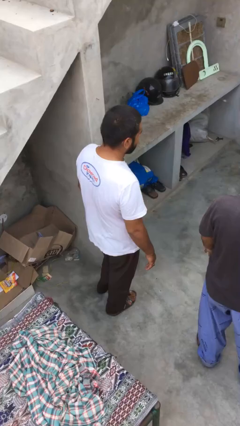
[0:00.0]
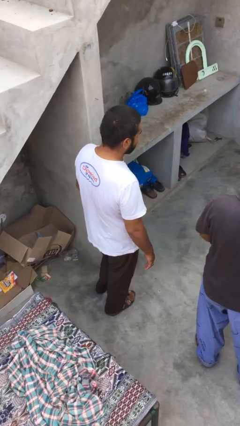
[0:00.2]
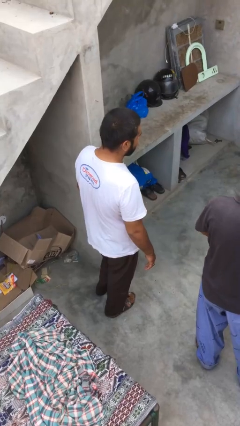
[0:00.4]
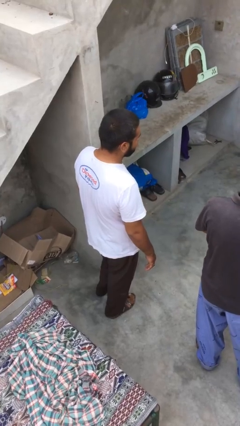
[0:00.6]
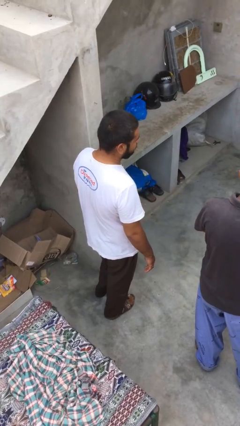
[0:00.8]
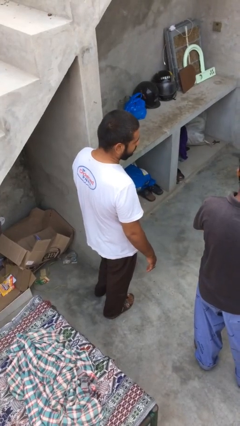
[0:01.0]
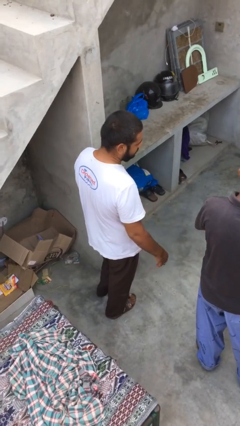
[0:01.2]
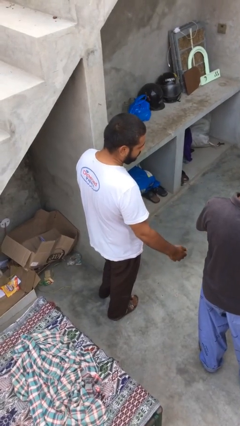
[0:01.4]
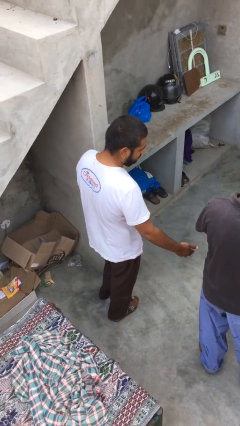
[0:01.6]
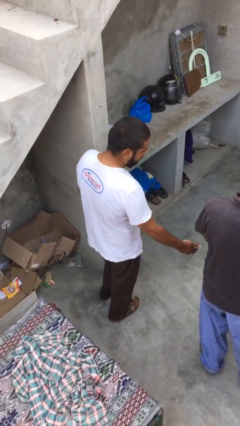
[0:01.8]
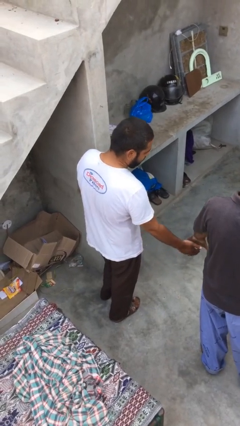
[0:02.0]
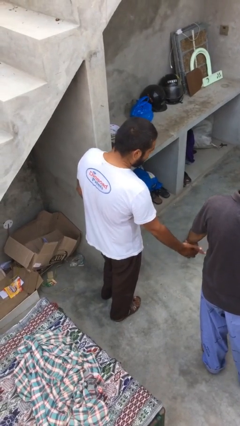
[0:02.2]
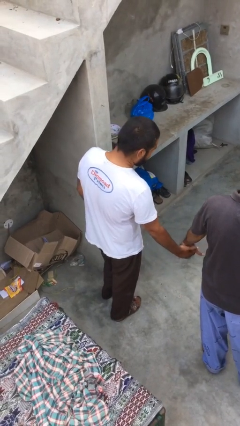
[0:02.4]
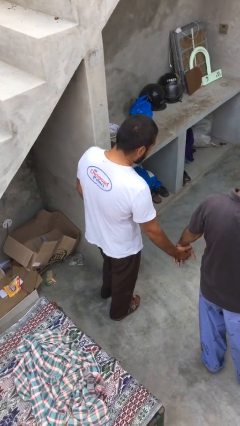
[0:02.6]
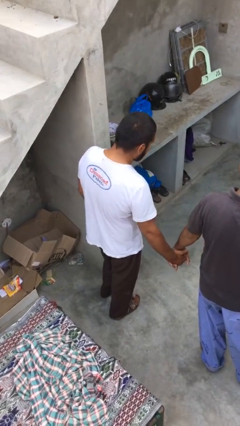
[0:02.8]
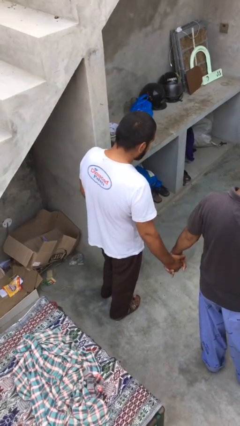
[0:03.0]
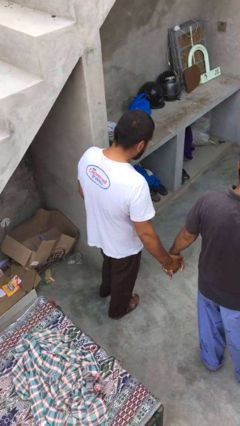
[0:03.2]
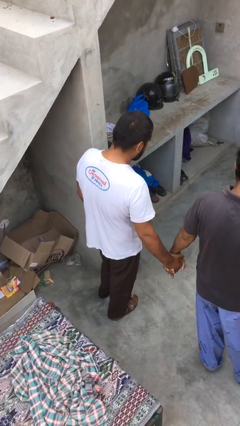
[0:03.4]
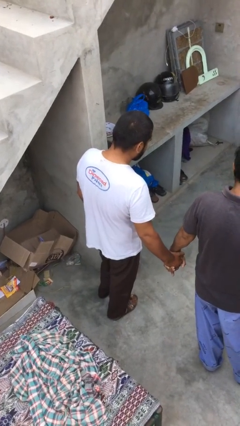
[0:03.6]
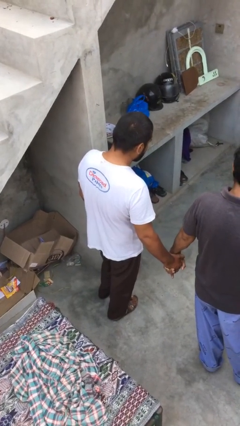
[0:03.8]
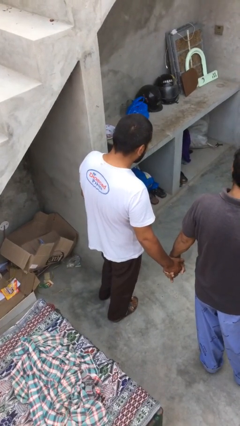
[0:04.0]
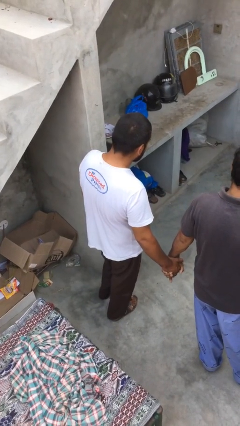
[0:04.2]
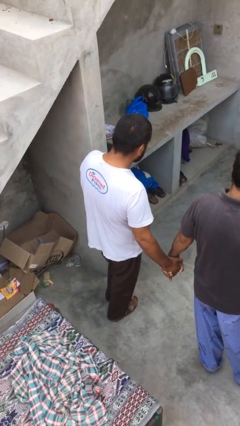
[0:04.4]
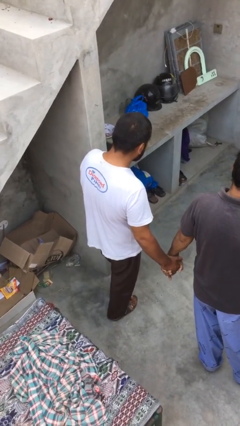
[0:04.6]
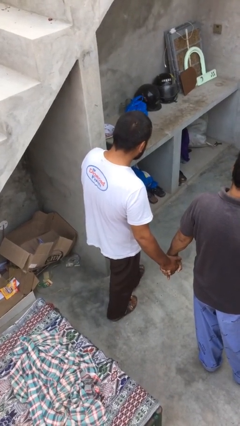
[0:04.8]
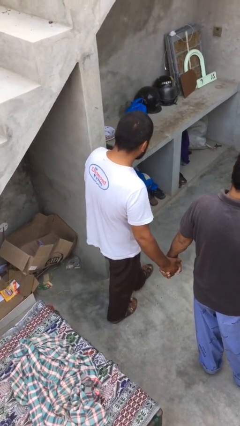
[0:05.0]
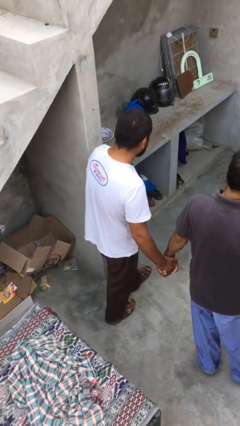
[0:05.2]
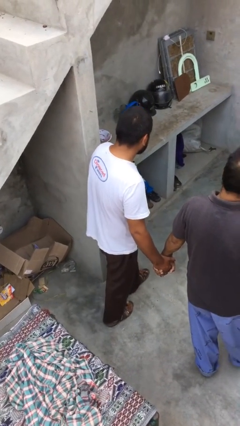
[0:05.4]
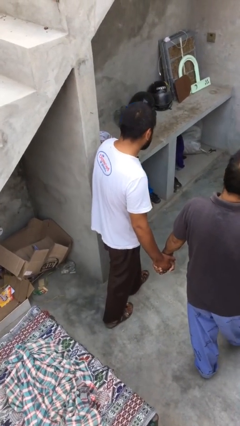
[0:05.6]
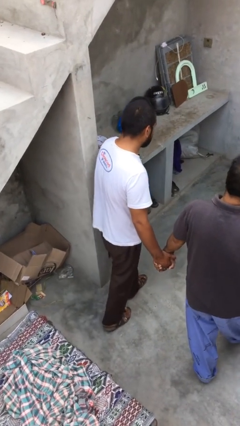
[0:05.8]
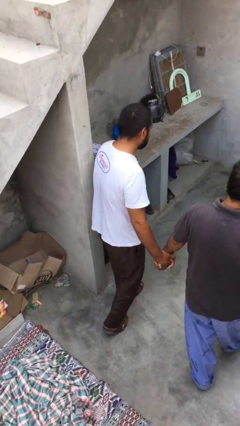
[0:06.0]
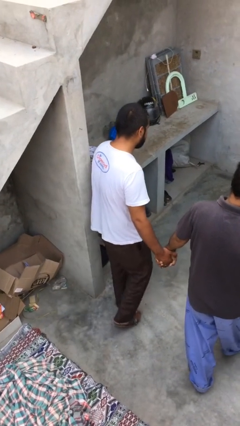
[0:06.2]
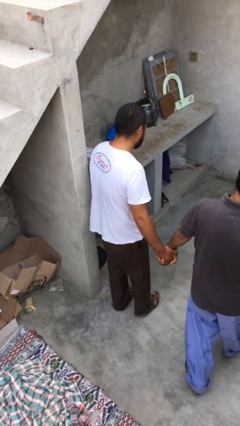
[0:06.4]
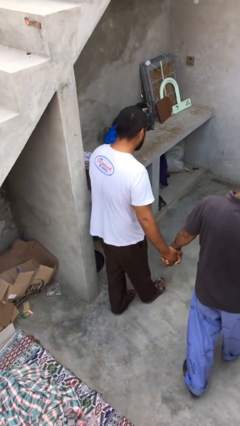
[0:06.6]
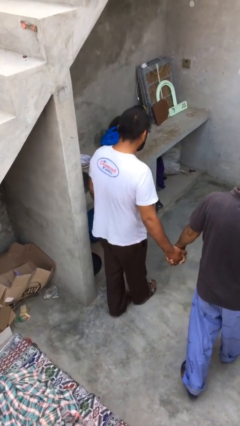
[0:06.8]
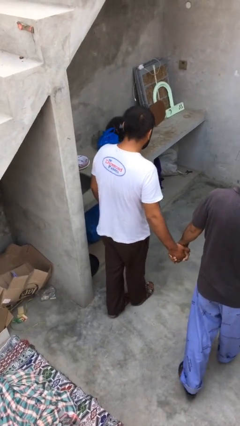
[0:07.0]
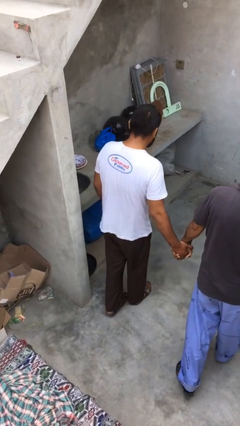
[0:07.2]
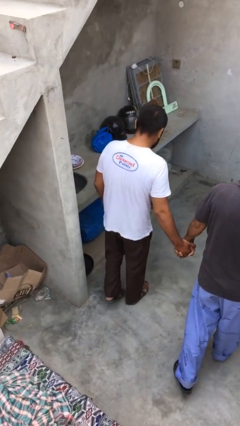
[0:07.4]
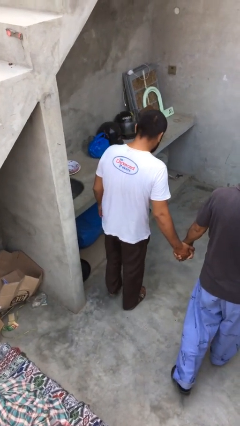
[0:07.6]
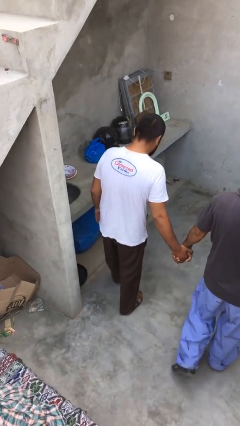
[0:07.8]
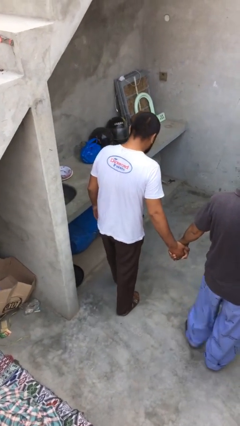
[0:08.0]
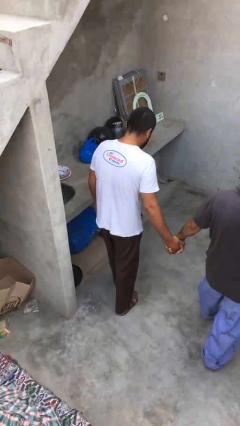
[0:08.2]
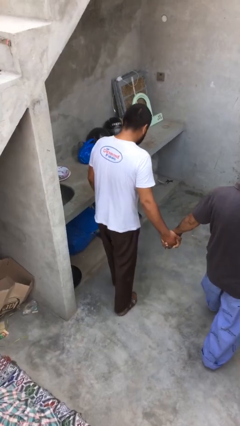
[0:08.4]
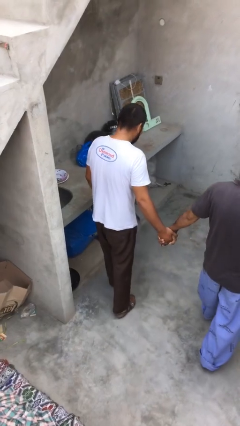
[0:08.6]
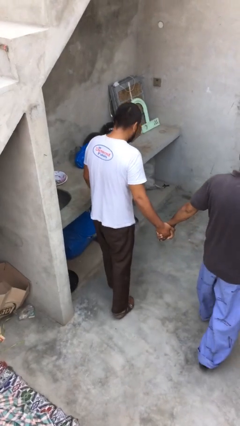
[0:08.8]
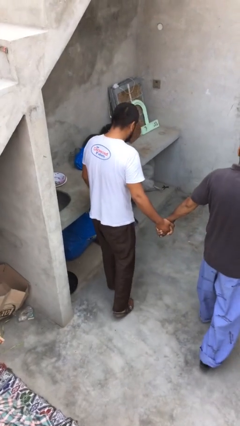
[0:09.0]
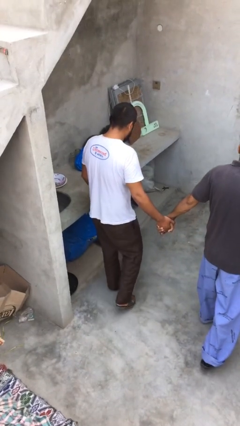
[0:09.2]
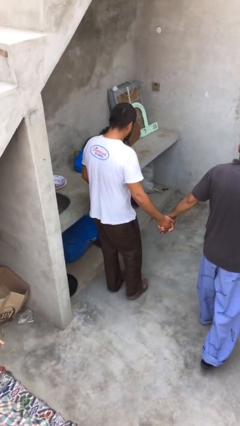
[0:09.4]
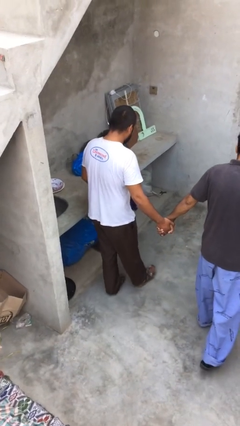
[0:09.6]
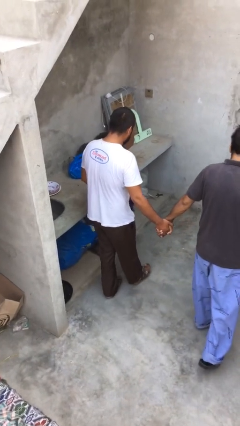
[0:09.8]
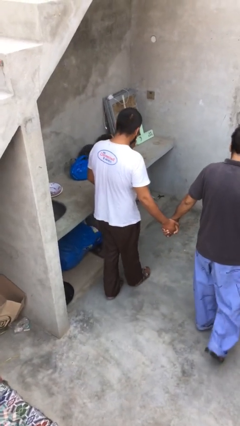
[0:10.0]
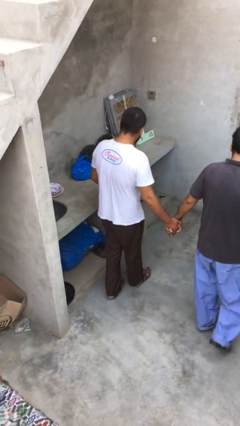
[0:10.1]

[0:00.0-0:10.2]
person holds hand

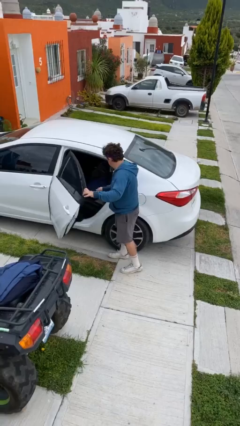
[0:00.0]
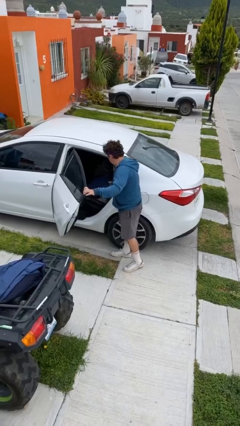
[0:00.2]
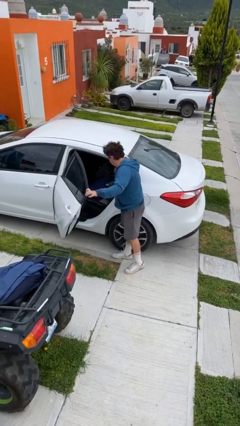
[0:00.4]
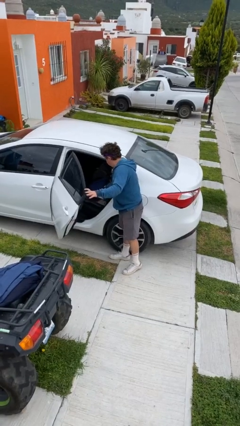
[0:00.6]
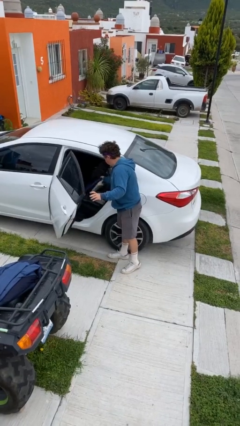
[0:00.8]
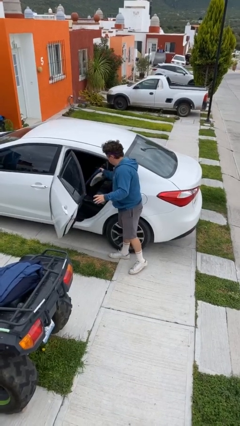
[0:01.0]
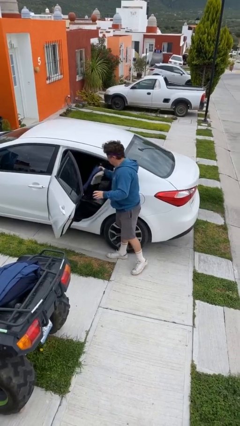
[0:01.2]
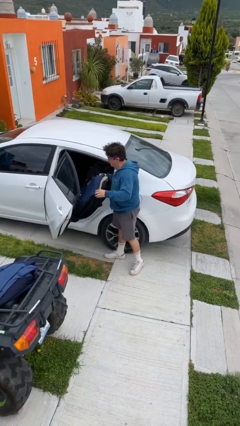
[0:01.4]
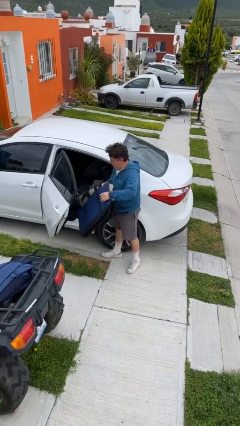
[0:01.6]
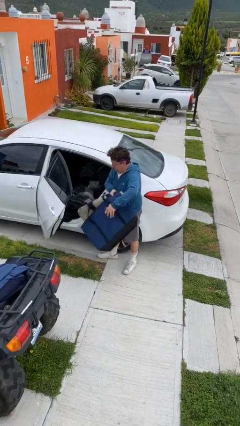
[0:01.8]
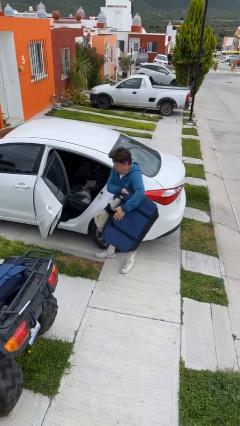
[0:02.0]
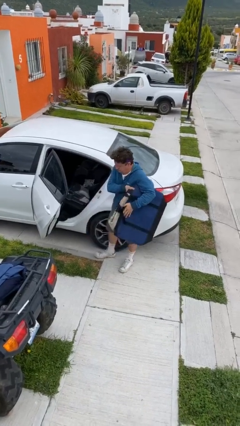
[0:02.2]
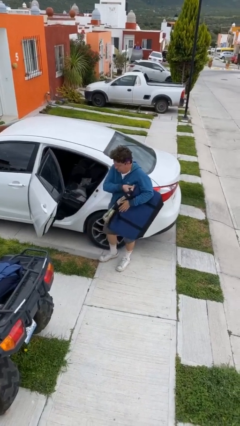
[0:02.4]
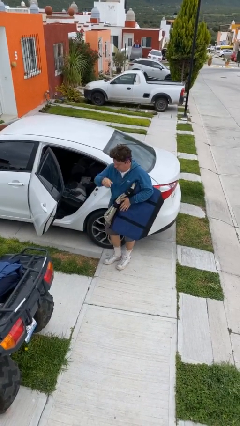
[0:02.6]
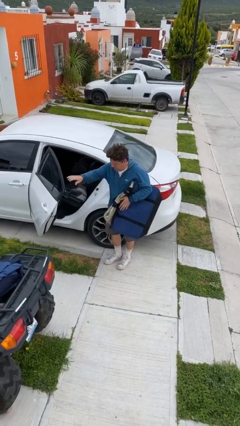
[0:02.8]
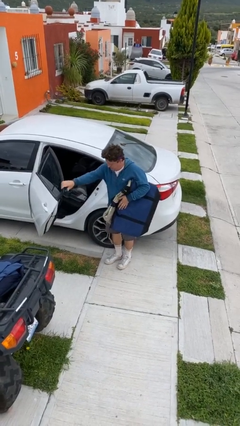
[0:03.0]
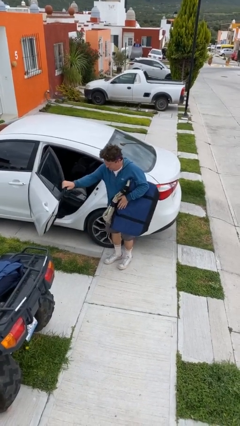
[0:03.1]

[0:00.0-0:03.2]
person unloads car

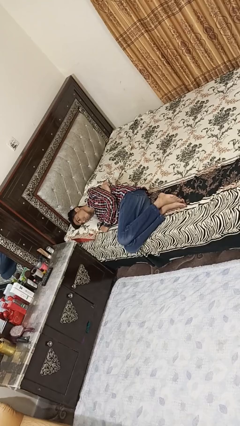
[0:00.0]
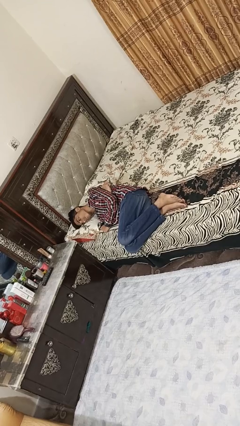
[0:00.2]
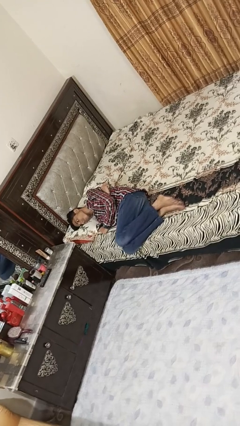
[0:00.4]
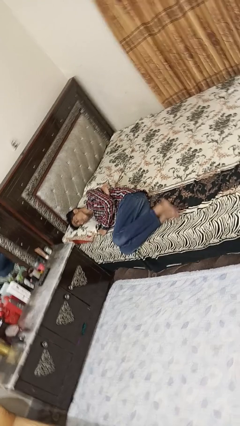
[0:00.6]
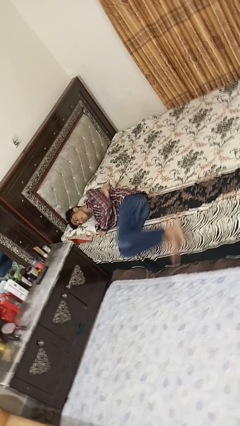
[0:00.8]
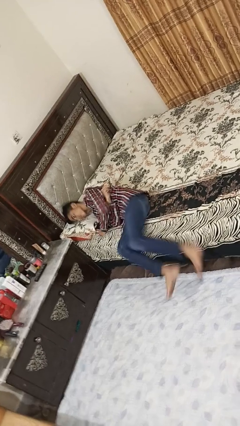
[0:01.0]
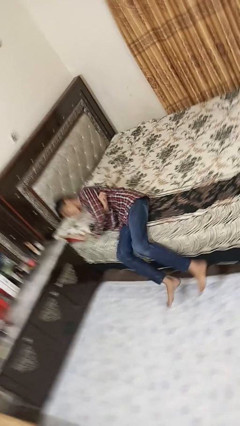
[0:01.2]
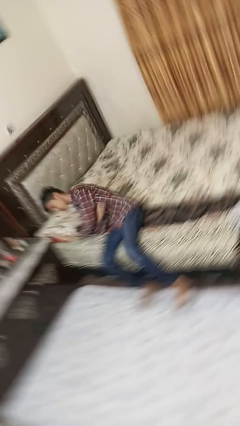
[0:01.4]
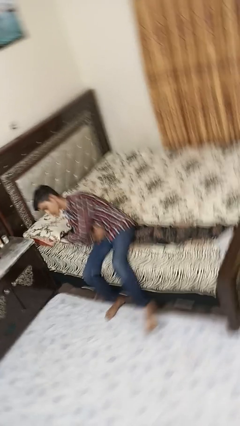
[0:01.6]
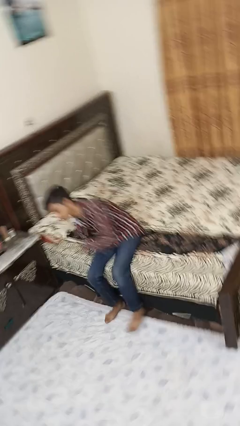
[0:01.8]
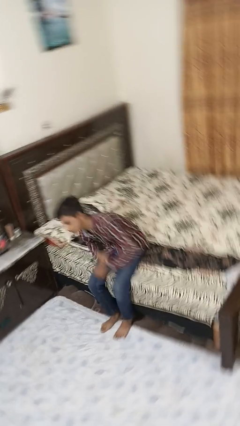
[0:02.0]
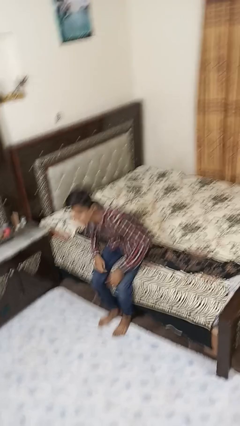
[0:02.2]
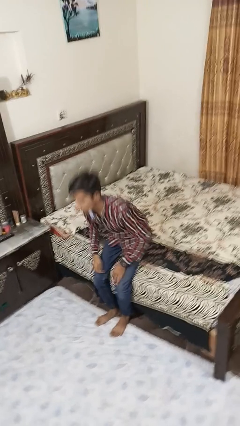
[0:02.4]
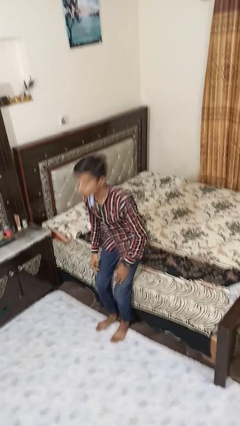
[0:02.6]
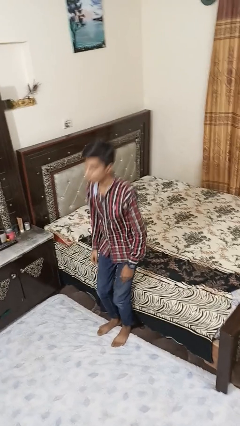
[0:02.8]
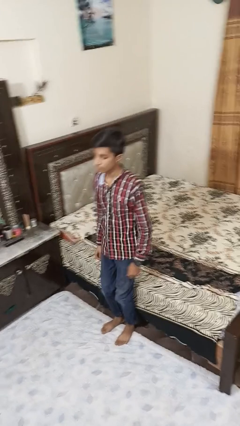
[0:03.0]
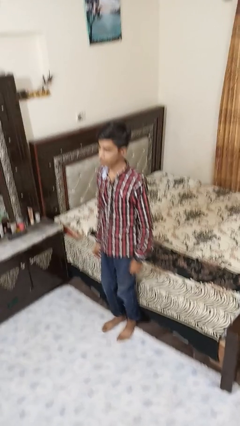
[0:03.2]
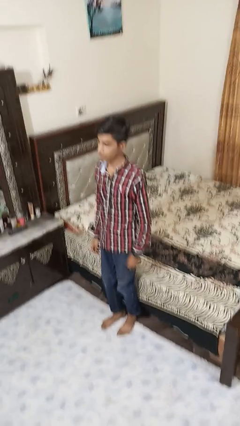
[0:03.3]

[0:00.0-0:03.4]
person stands up

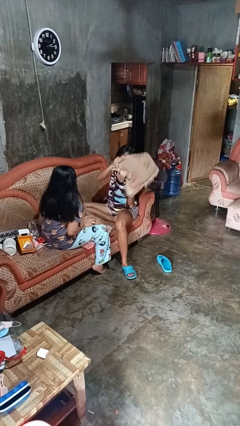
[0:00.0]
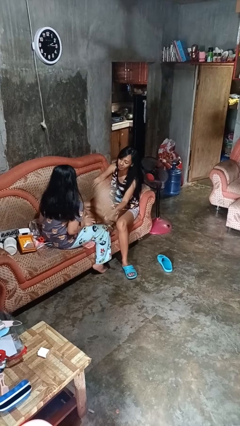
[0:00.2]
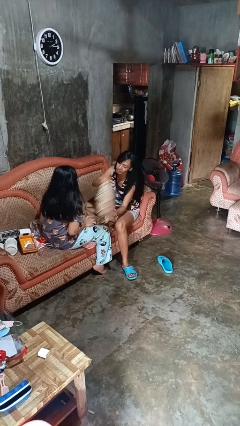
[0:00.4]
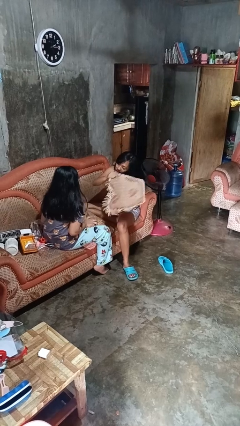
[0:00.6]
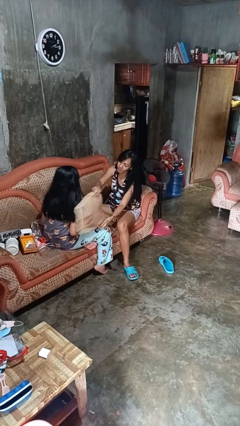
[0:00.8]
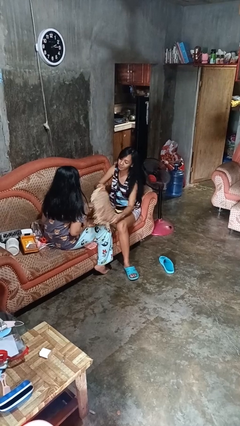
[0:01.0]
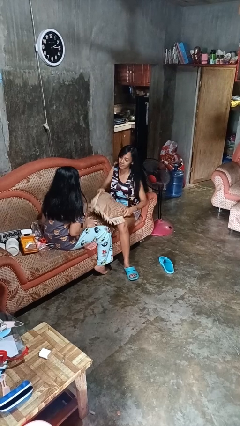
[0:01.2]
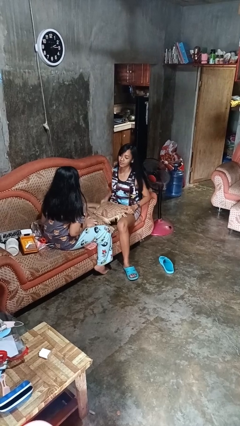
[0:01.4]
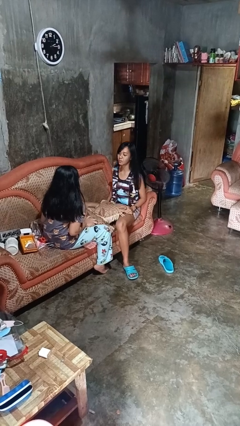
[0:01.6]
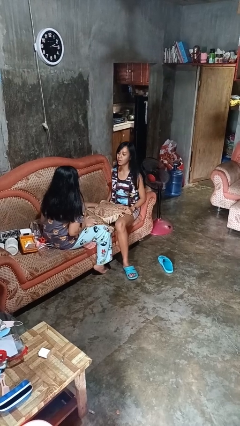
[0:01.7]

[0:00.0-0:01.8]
person hits person with pillow
